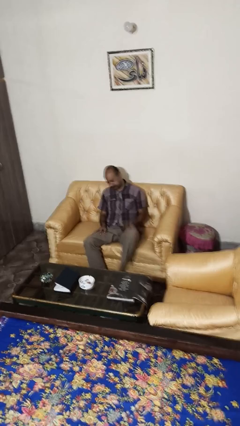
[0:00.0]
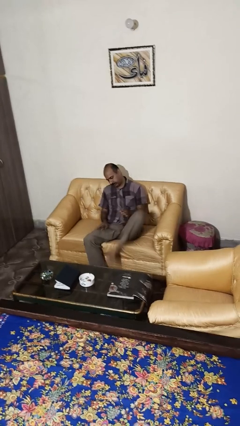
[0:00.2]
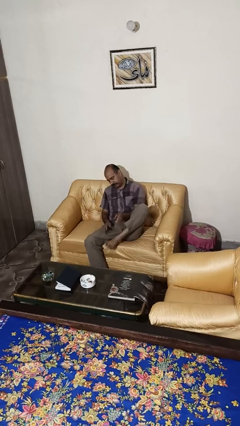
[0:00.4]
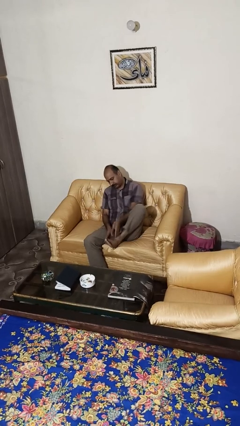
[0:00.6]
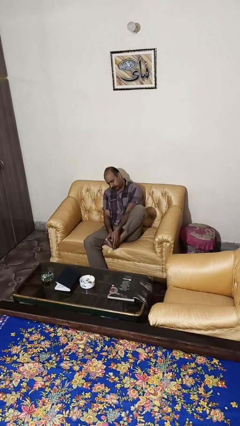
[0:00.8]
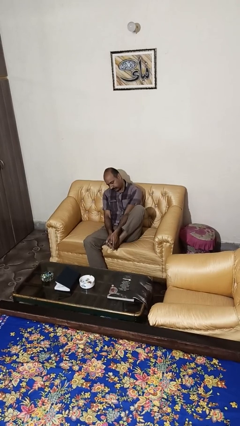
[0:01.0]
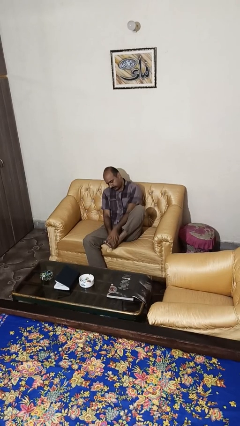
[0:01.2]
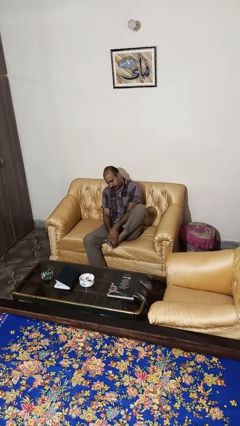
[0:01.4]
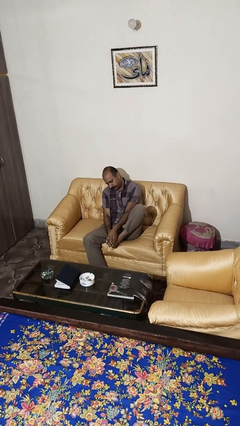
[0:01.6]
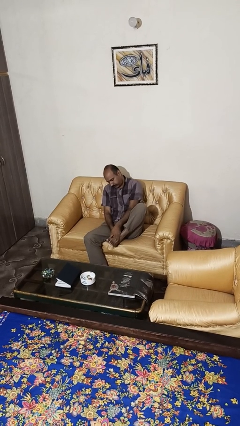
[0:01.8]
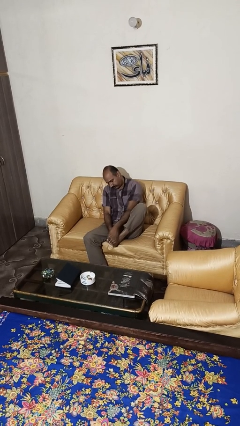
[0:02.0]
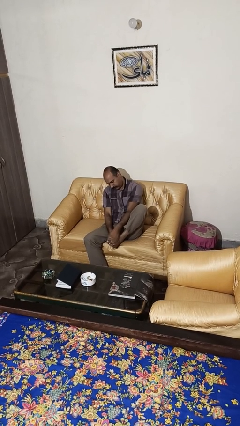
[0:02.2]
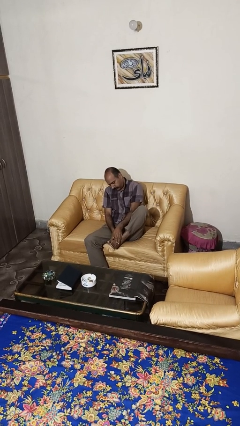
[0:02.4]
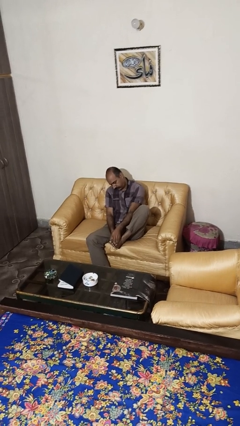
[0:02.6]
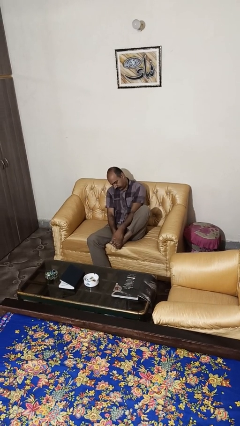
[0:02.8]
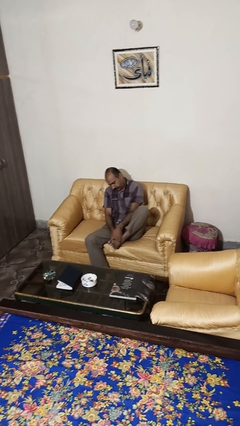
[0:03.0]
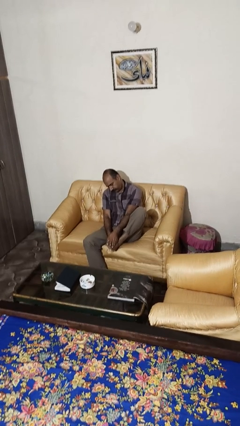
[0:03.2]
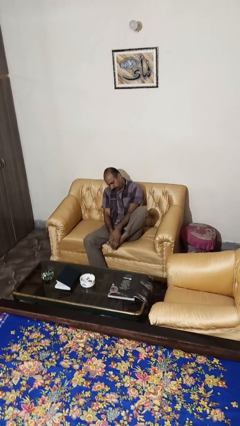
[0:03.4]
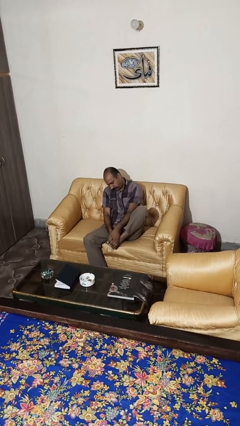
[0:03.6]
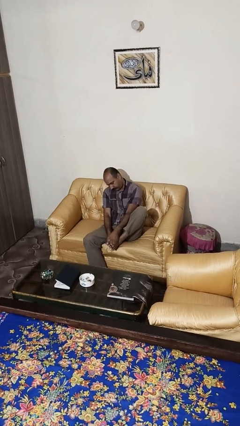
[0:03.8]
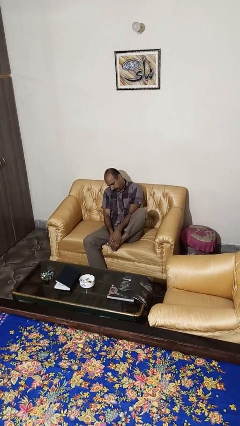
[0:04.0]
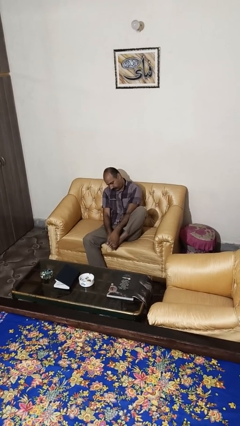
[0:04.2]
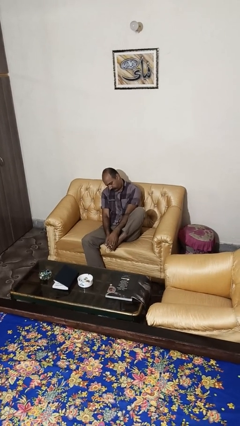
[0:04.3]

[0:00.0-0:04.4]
person rubs foot

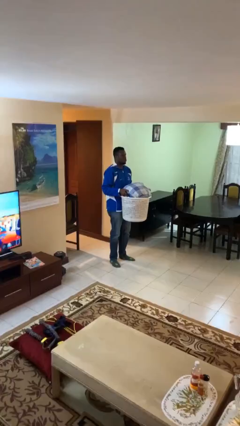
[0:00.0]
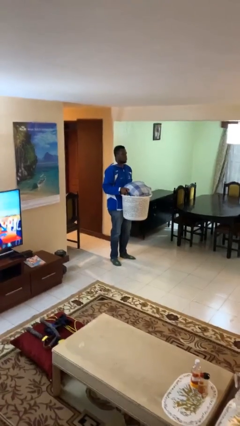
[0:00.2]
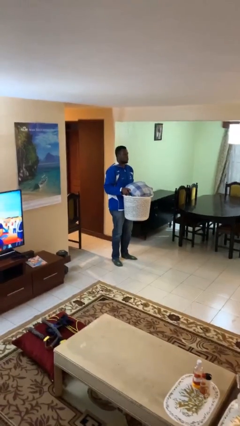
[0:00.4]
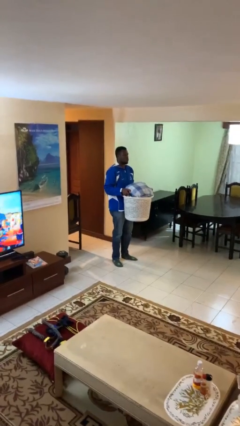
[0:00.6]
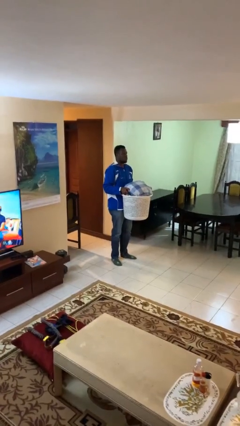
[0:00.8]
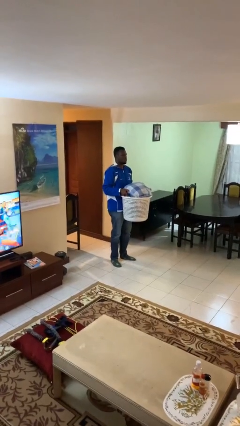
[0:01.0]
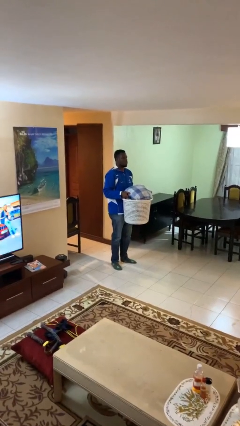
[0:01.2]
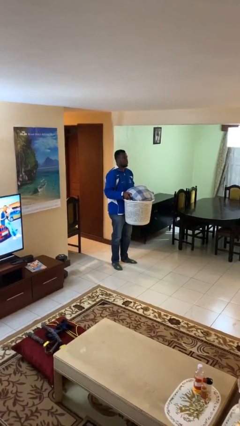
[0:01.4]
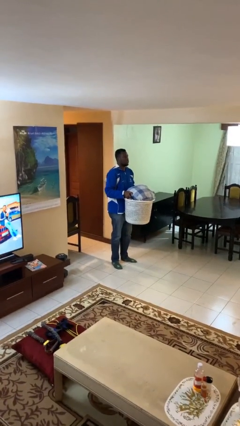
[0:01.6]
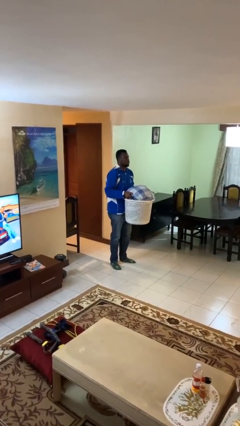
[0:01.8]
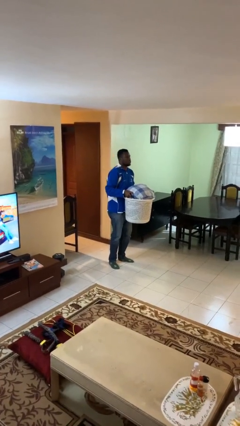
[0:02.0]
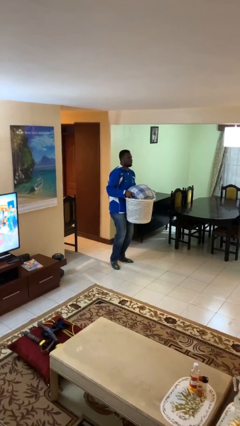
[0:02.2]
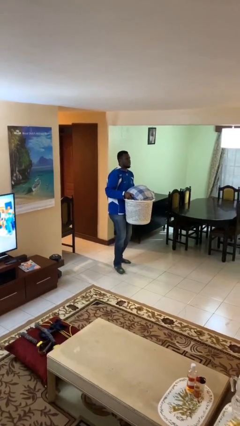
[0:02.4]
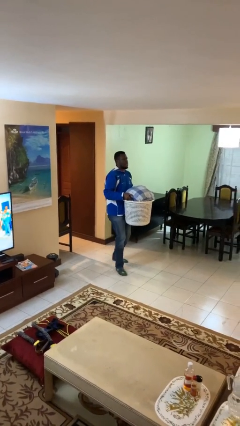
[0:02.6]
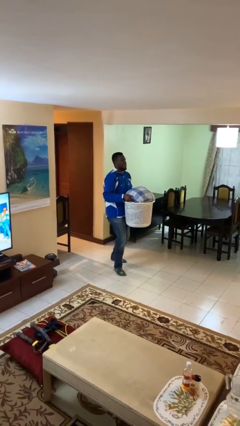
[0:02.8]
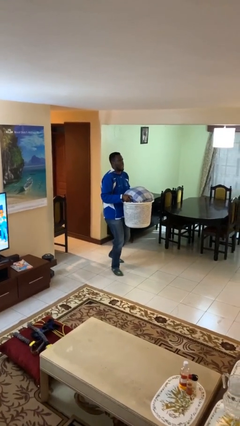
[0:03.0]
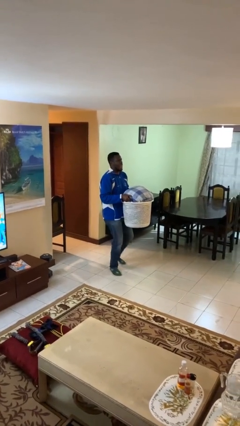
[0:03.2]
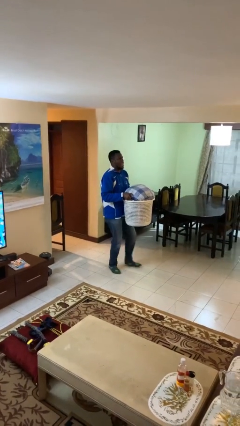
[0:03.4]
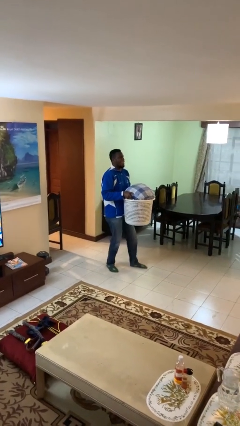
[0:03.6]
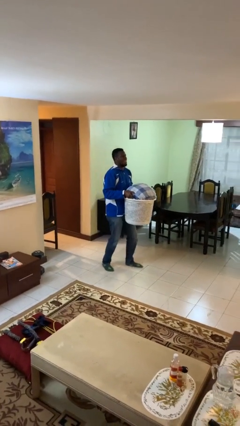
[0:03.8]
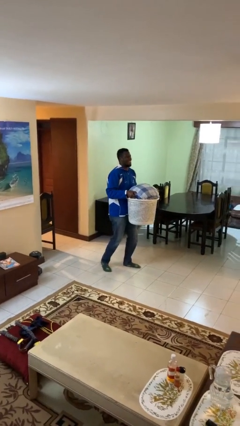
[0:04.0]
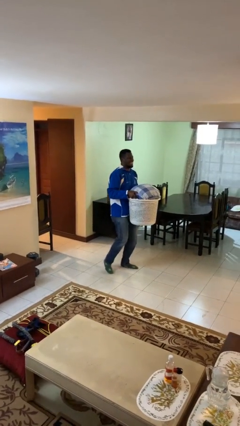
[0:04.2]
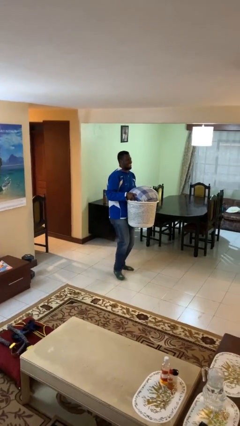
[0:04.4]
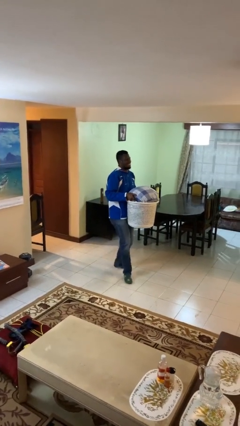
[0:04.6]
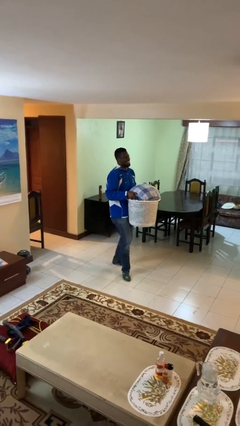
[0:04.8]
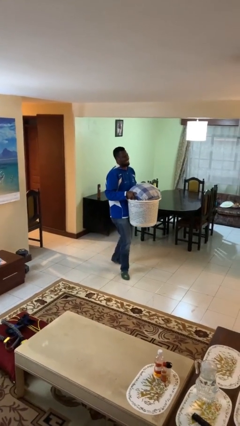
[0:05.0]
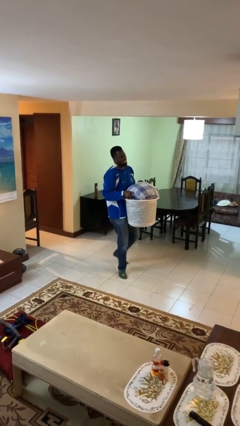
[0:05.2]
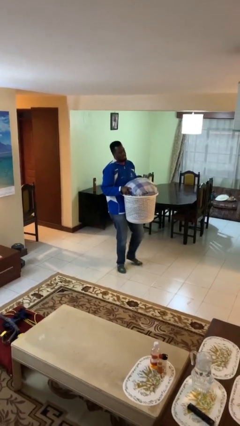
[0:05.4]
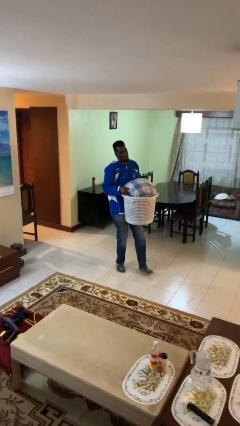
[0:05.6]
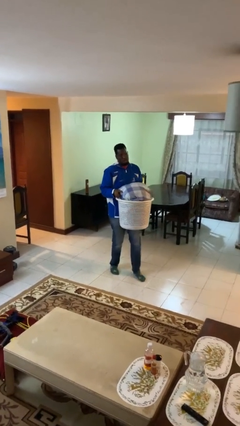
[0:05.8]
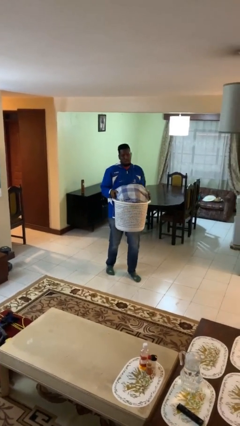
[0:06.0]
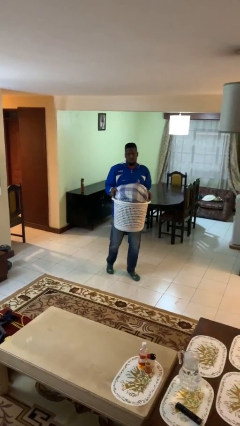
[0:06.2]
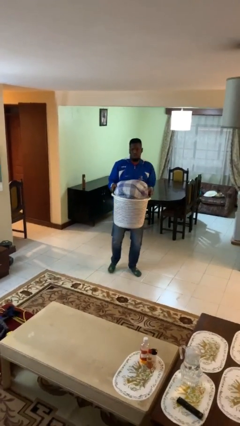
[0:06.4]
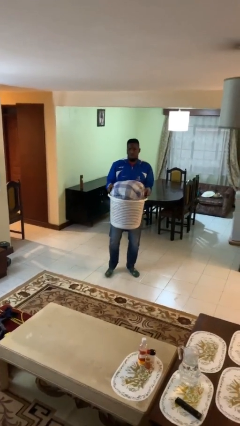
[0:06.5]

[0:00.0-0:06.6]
person carries heavy object

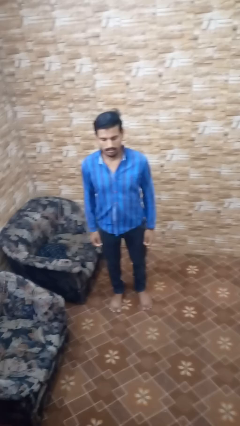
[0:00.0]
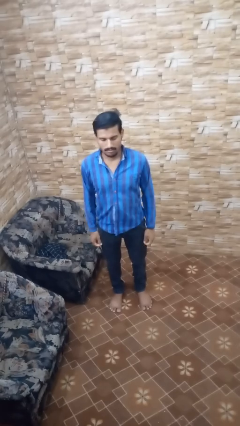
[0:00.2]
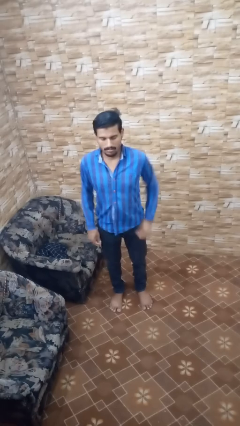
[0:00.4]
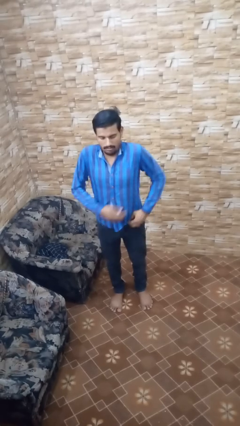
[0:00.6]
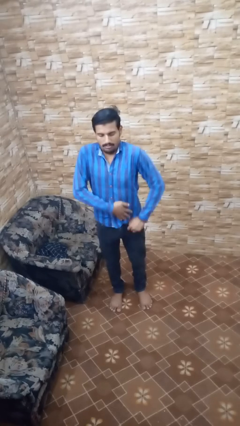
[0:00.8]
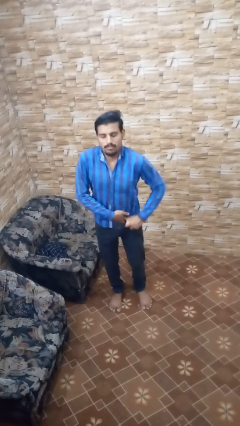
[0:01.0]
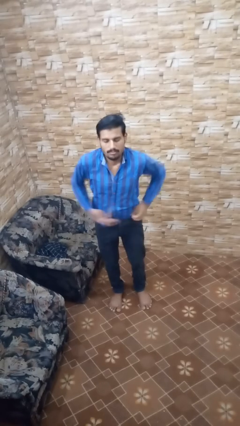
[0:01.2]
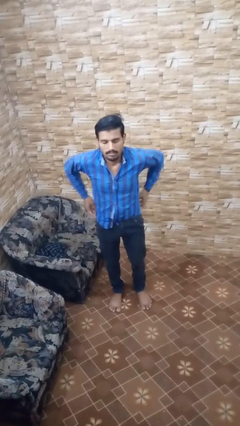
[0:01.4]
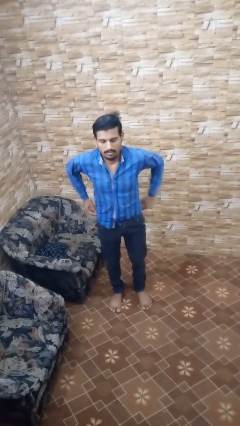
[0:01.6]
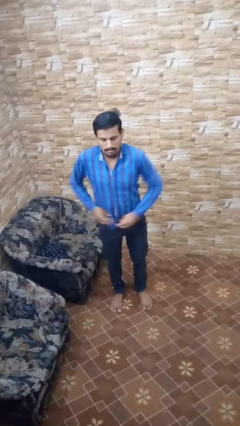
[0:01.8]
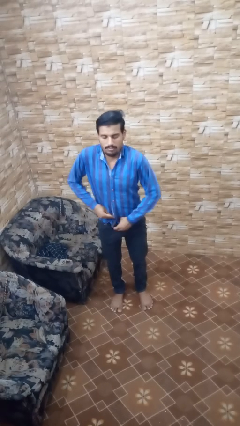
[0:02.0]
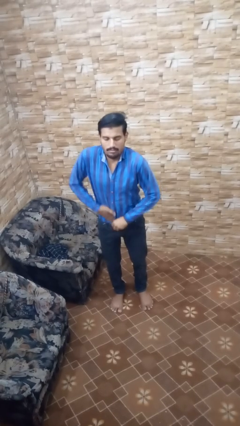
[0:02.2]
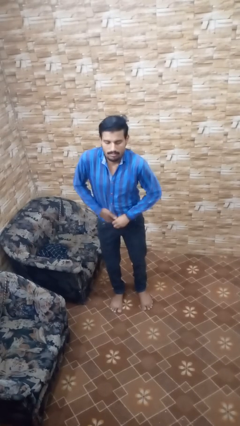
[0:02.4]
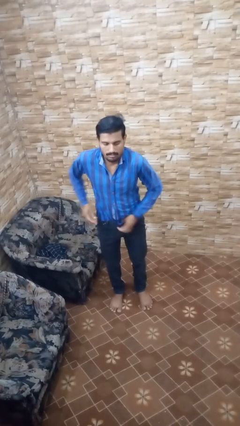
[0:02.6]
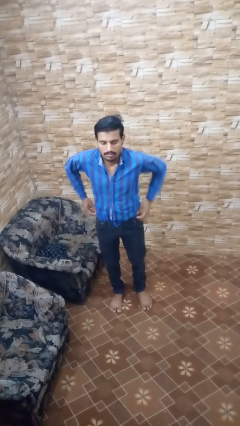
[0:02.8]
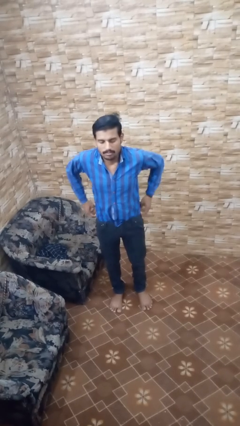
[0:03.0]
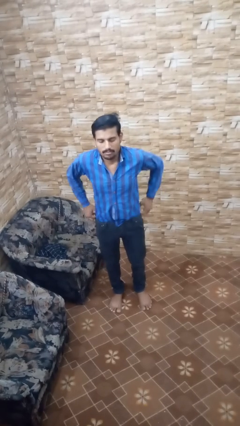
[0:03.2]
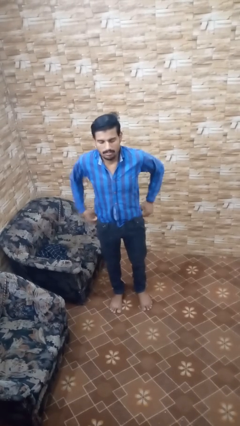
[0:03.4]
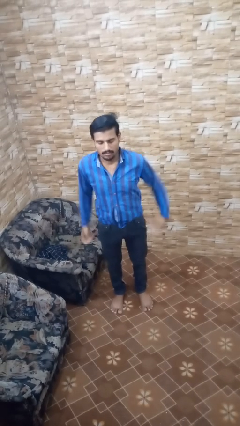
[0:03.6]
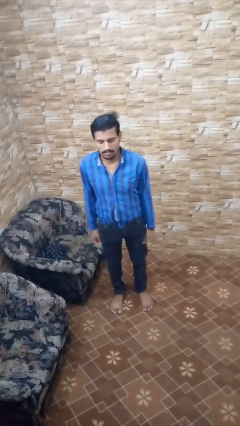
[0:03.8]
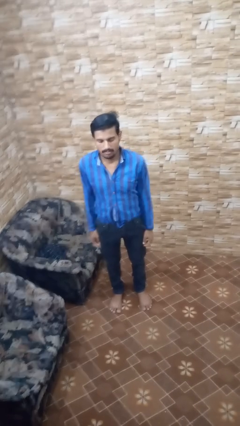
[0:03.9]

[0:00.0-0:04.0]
person tucks in shirt

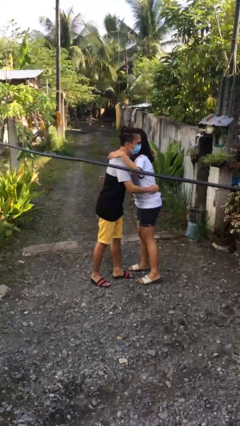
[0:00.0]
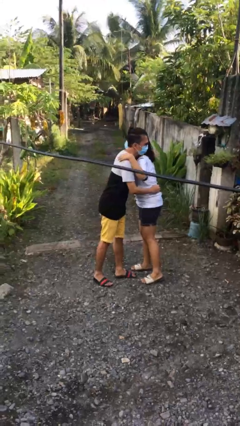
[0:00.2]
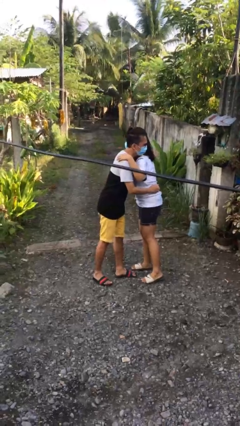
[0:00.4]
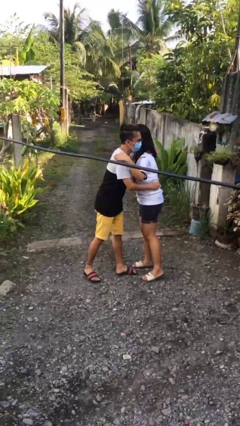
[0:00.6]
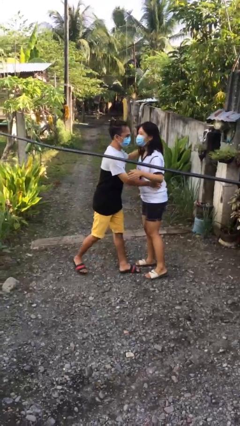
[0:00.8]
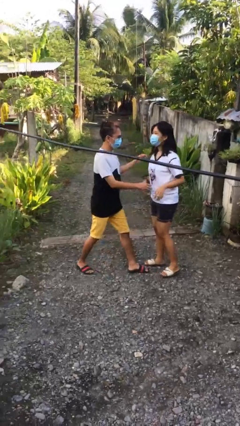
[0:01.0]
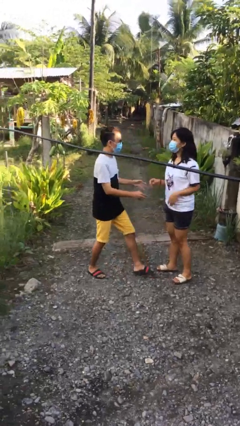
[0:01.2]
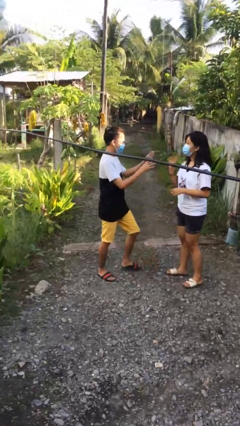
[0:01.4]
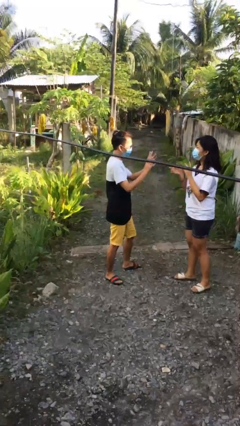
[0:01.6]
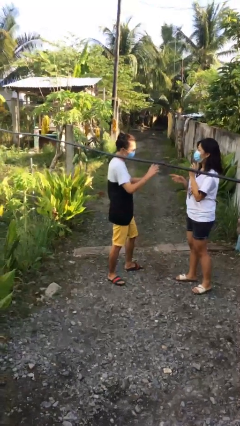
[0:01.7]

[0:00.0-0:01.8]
person embraces person

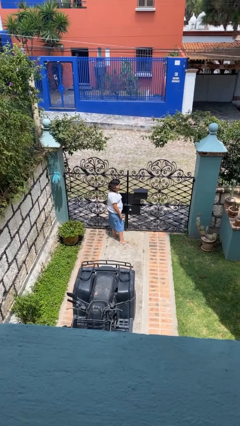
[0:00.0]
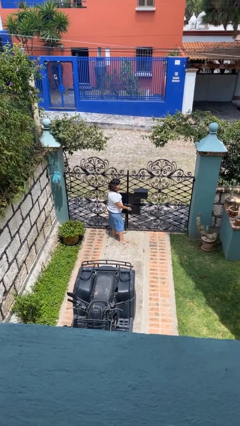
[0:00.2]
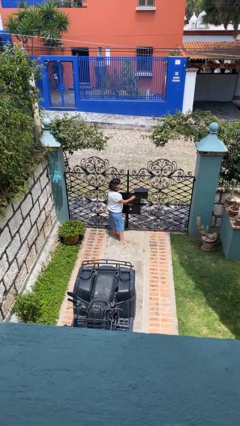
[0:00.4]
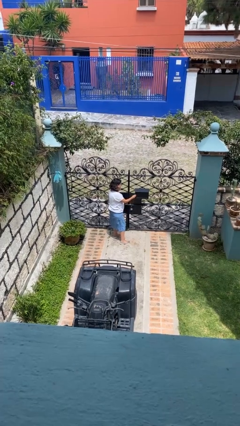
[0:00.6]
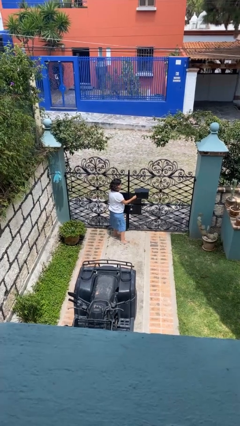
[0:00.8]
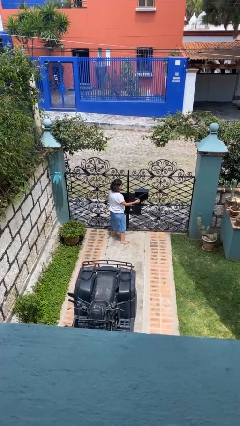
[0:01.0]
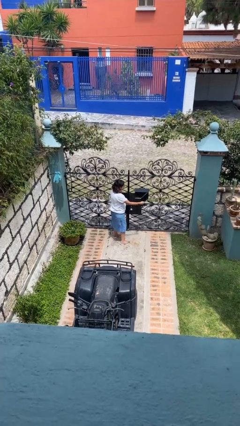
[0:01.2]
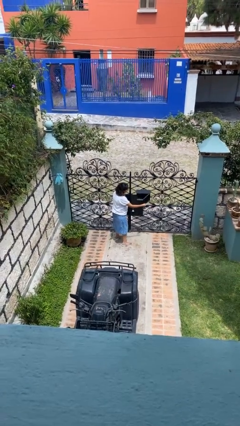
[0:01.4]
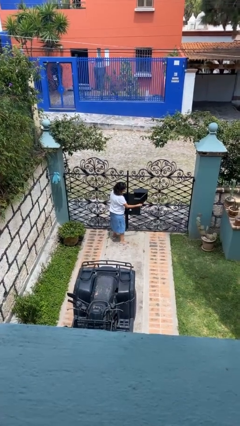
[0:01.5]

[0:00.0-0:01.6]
person opens mailbox
